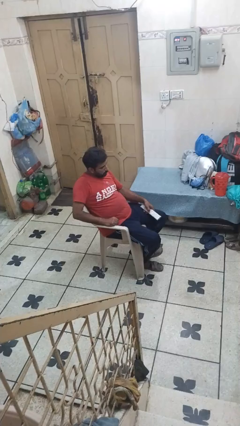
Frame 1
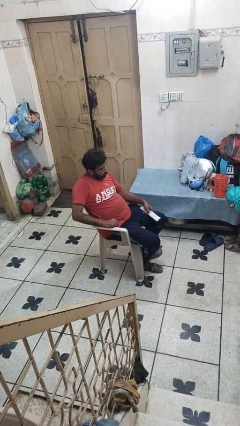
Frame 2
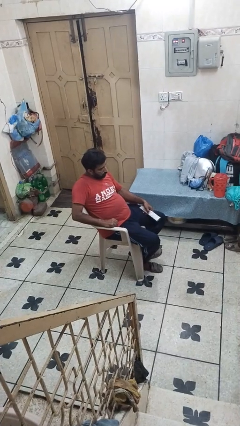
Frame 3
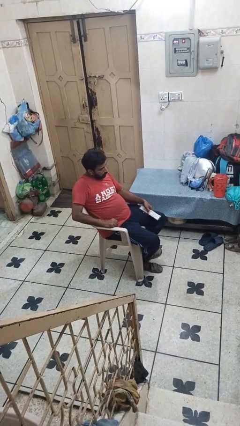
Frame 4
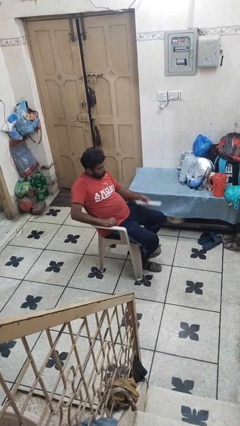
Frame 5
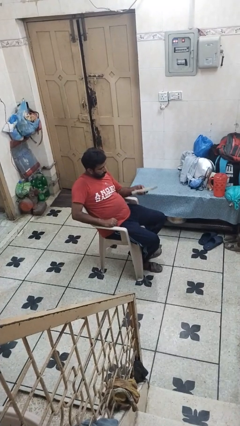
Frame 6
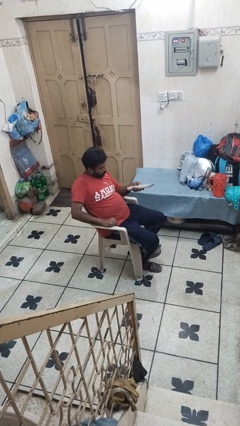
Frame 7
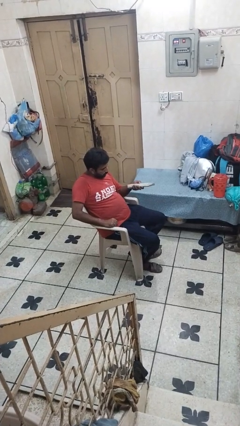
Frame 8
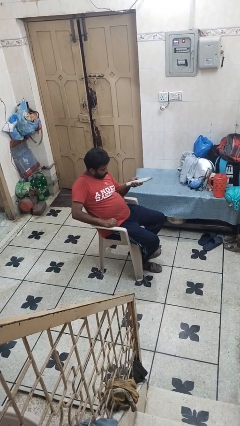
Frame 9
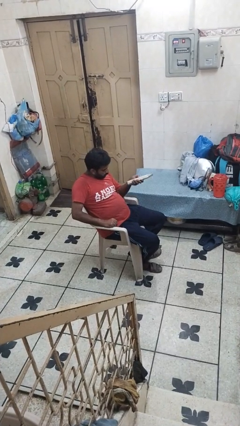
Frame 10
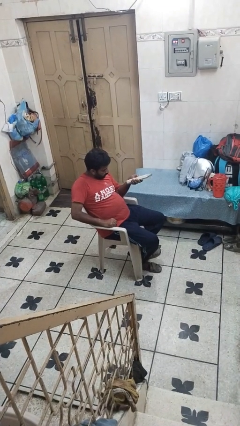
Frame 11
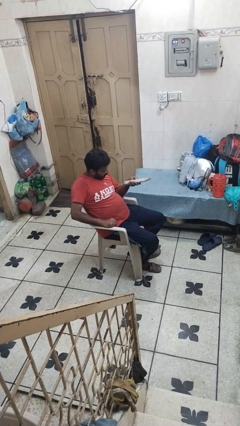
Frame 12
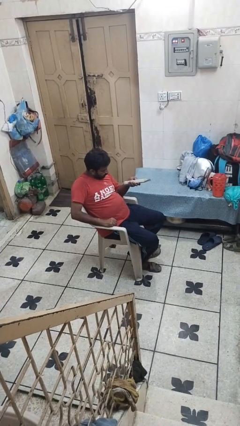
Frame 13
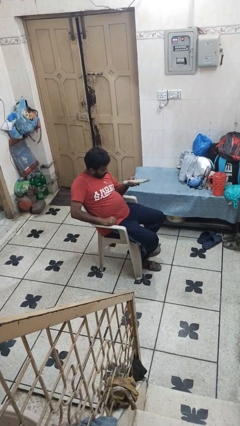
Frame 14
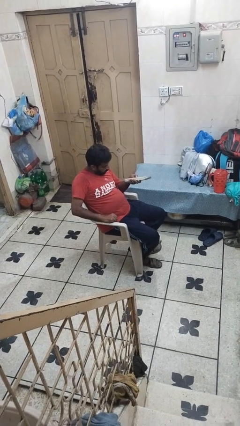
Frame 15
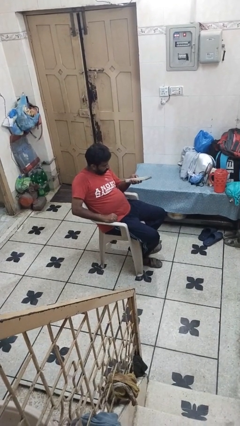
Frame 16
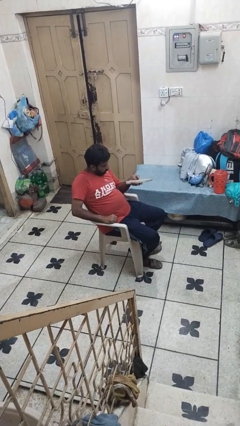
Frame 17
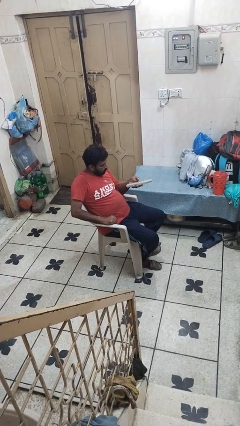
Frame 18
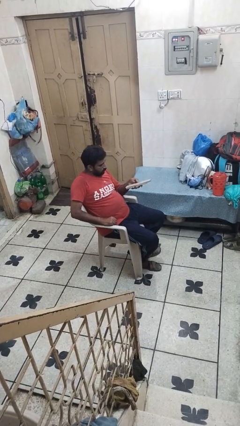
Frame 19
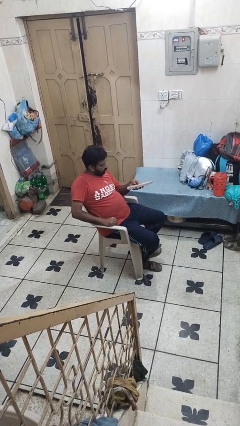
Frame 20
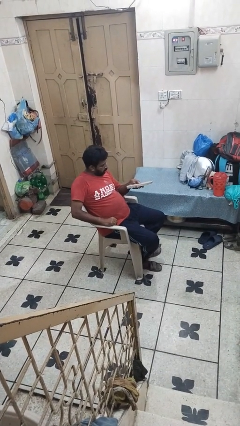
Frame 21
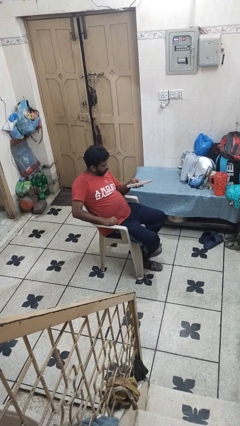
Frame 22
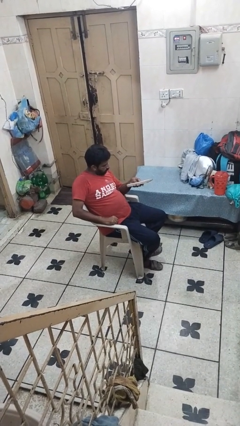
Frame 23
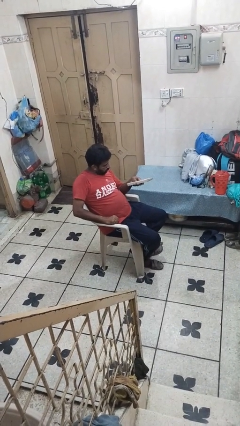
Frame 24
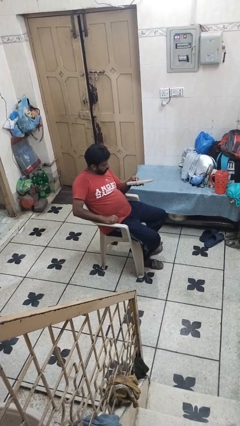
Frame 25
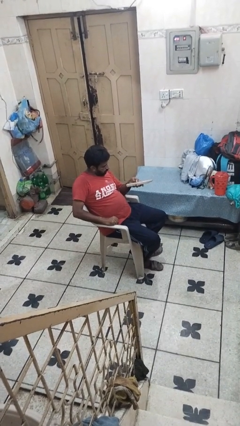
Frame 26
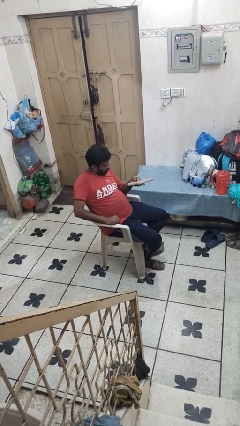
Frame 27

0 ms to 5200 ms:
person uses television remote

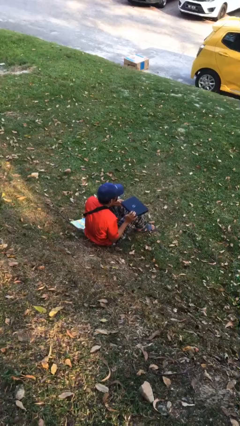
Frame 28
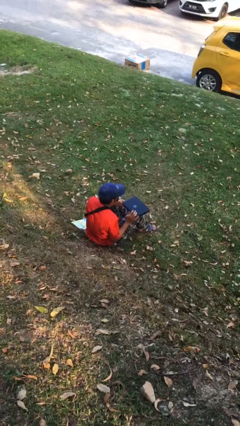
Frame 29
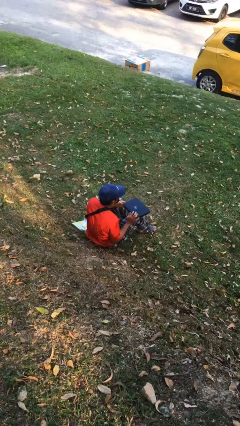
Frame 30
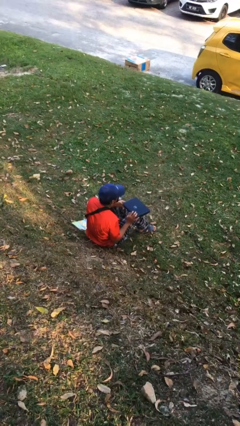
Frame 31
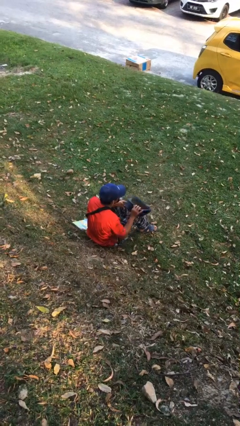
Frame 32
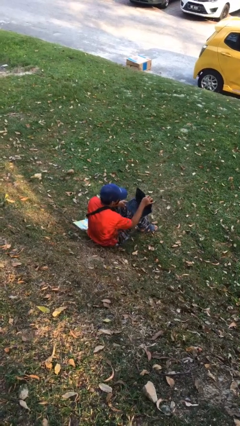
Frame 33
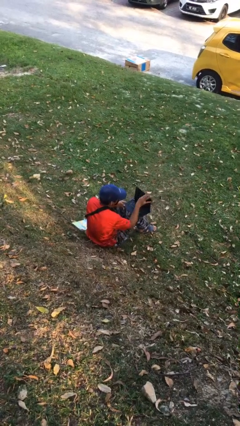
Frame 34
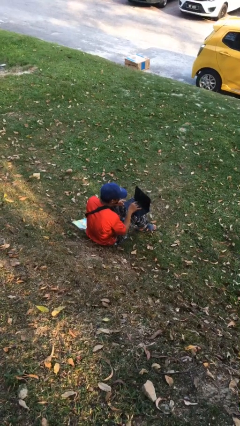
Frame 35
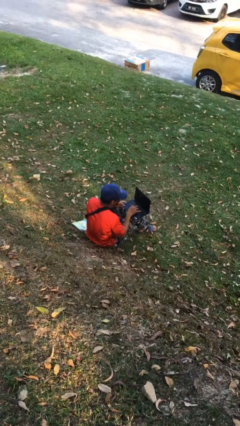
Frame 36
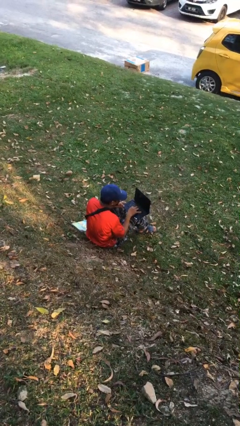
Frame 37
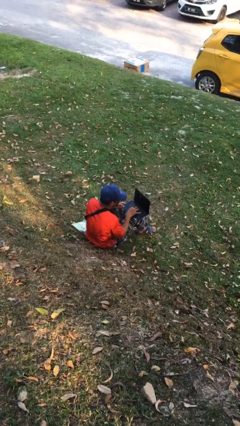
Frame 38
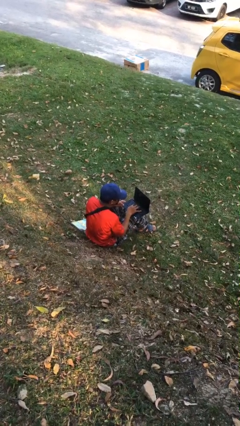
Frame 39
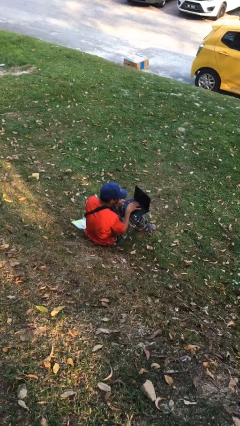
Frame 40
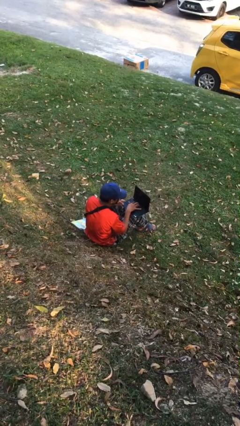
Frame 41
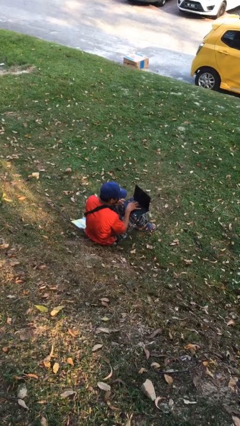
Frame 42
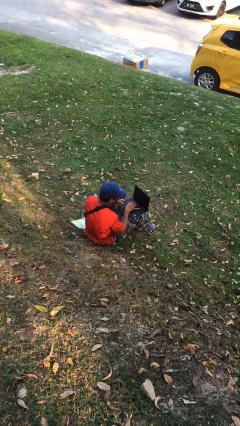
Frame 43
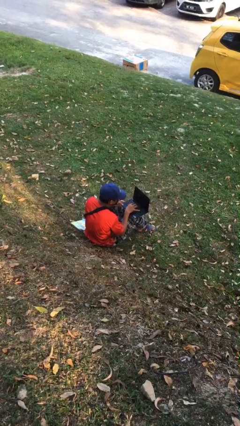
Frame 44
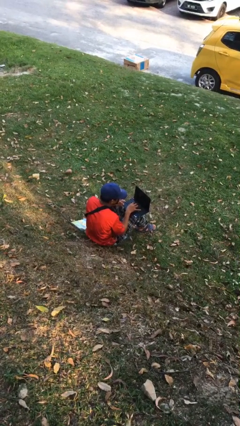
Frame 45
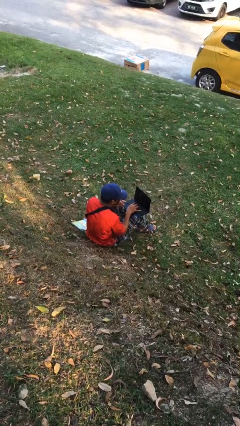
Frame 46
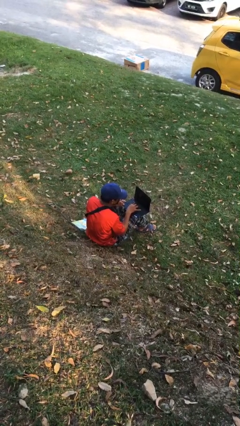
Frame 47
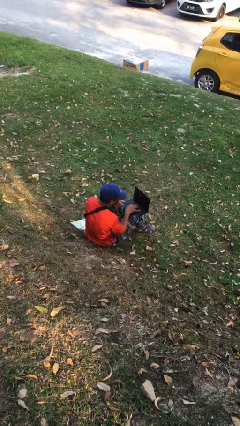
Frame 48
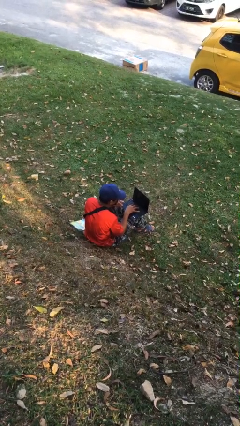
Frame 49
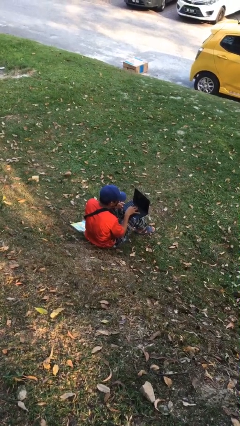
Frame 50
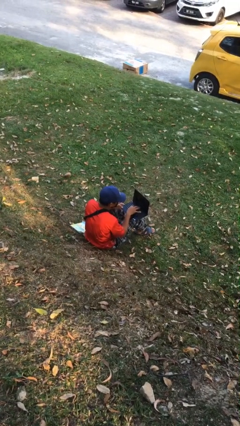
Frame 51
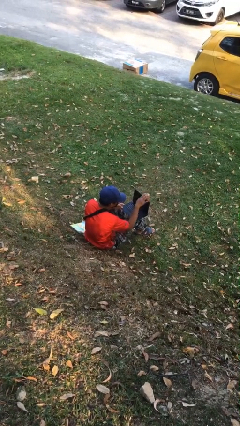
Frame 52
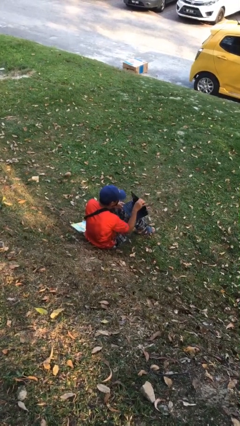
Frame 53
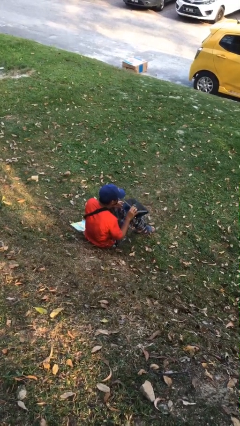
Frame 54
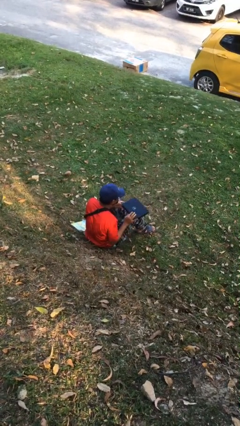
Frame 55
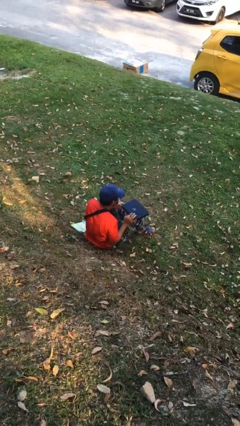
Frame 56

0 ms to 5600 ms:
person interacts with laptop

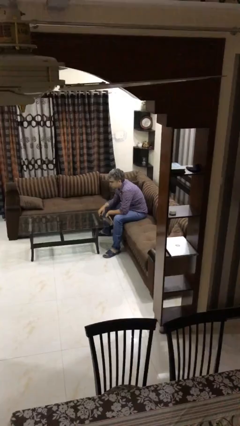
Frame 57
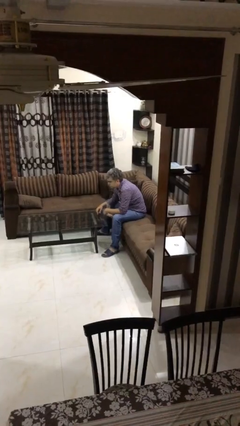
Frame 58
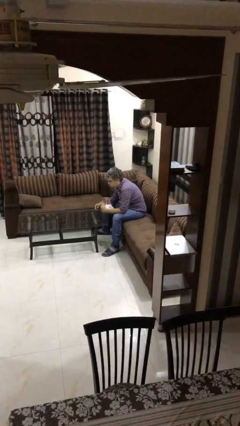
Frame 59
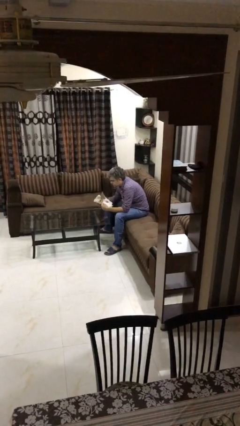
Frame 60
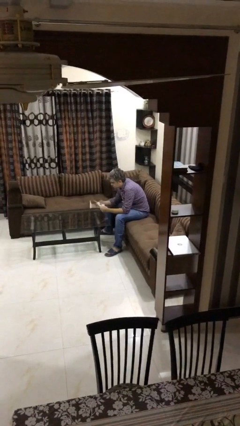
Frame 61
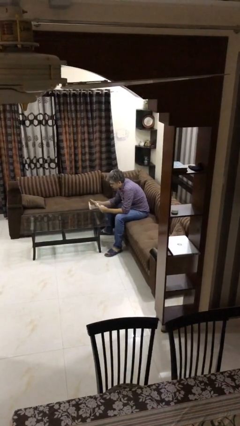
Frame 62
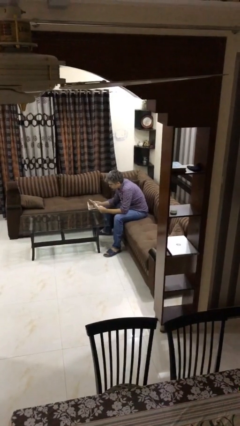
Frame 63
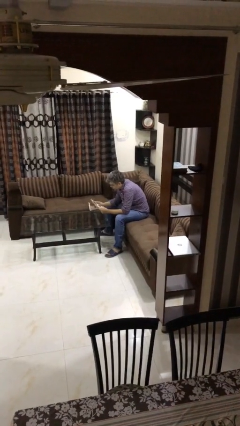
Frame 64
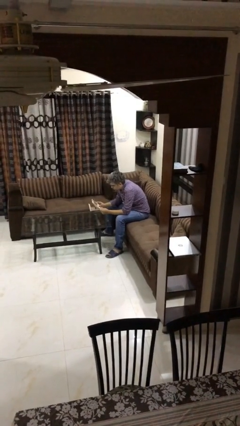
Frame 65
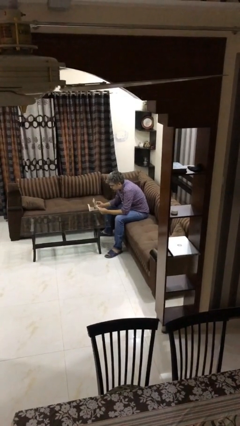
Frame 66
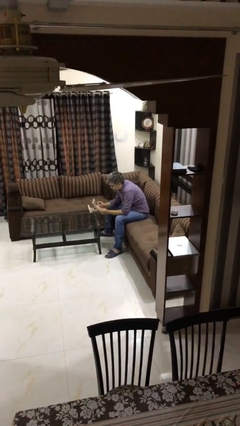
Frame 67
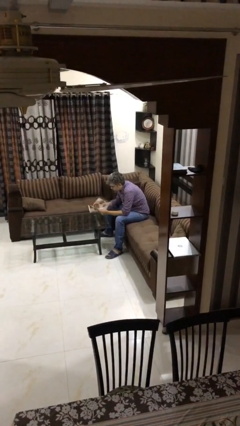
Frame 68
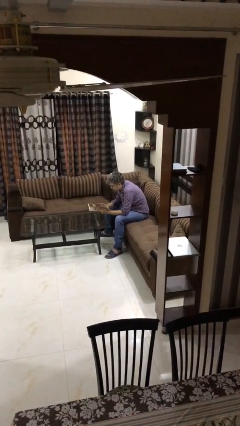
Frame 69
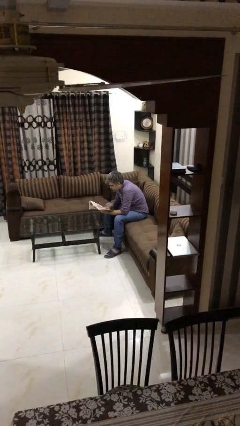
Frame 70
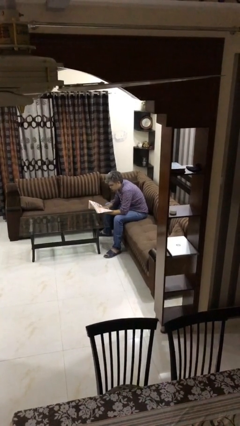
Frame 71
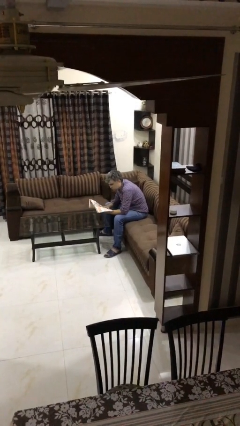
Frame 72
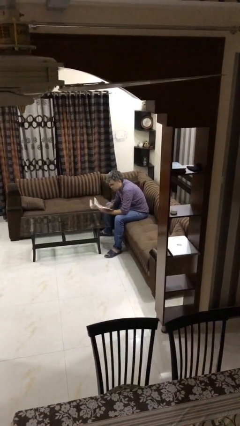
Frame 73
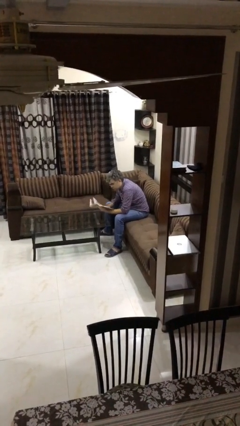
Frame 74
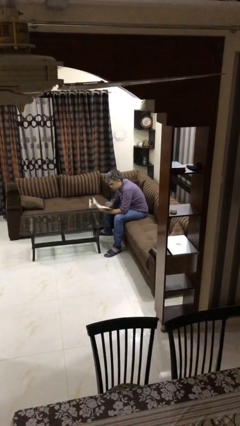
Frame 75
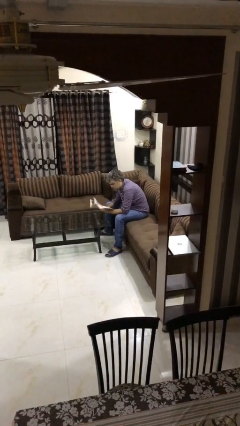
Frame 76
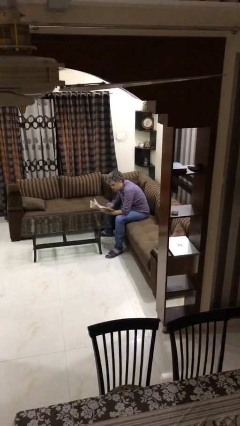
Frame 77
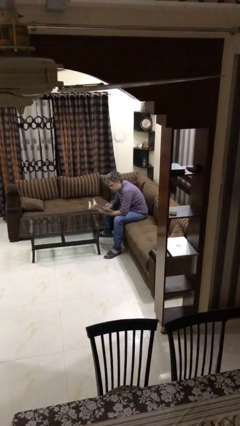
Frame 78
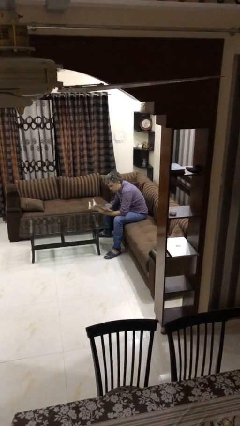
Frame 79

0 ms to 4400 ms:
person reads document

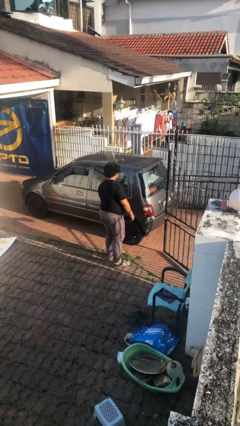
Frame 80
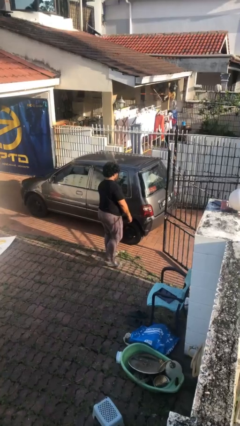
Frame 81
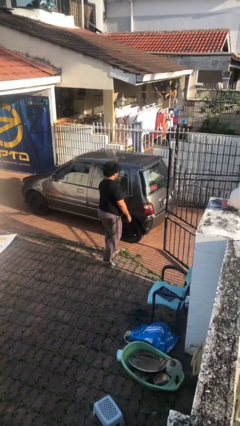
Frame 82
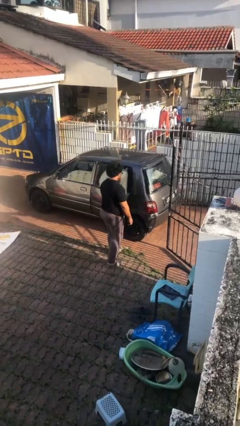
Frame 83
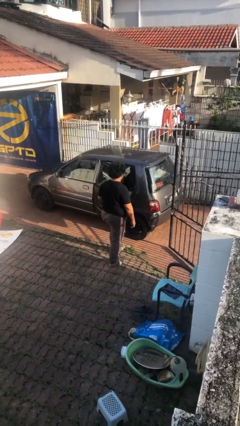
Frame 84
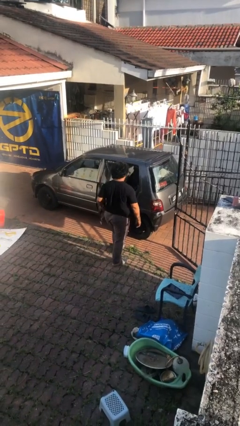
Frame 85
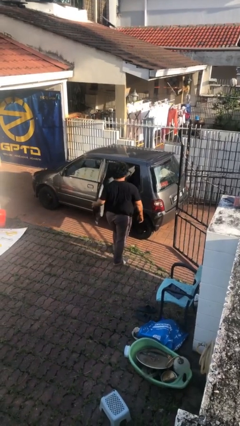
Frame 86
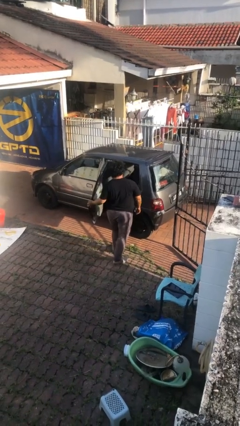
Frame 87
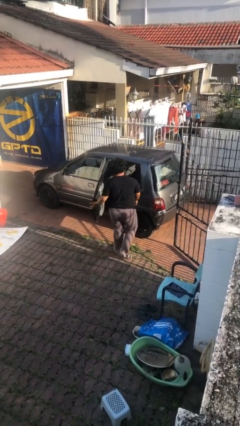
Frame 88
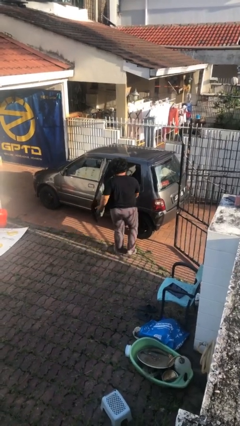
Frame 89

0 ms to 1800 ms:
person opens car door

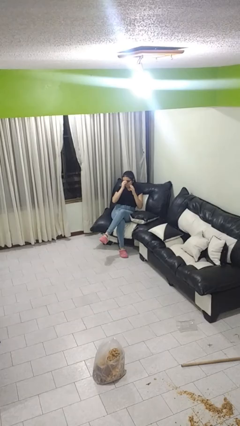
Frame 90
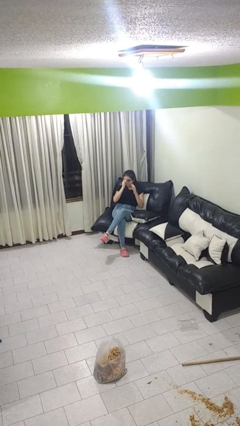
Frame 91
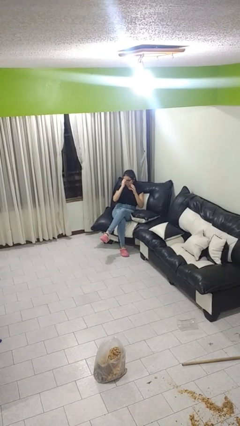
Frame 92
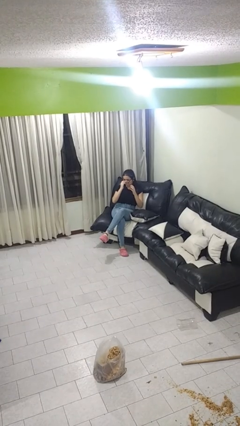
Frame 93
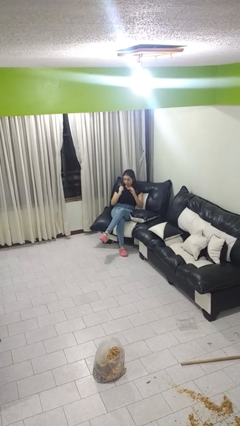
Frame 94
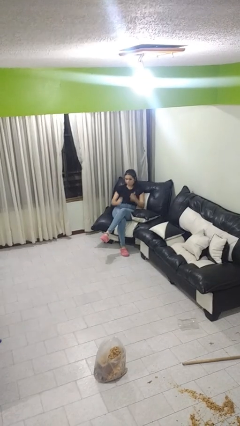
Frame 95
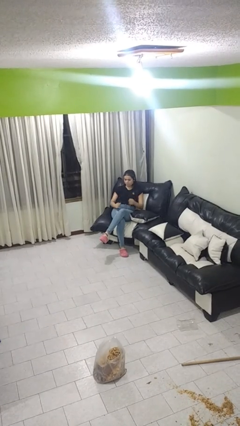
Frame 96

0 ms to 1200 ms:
person takes off glasses
